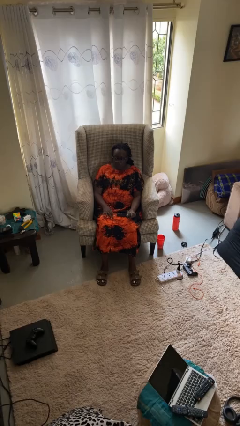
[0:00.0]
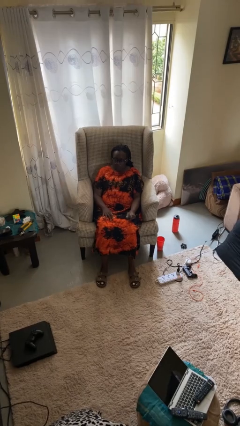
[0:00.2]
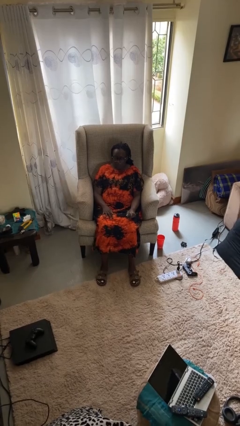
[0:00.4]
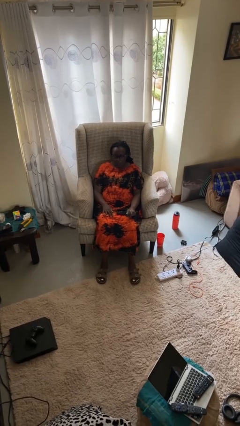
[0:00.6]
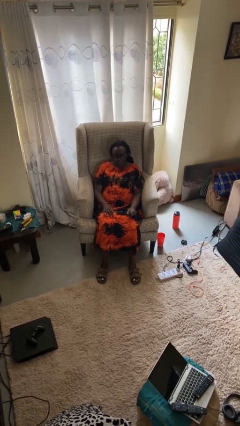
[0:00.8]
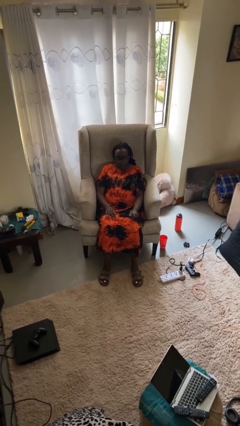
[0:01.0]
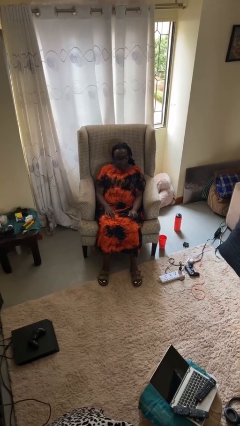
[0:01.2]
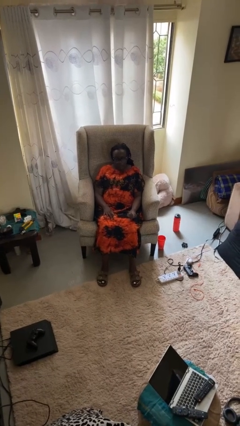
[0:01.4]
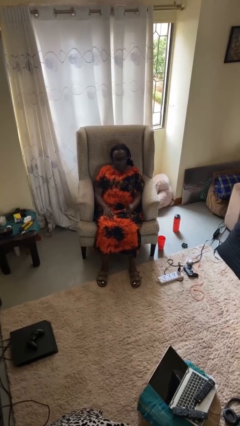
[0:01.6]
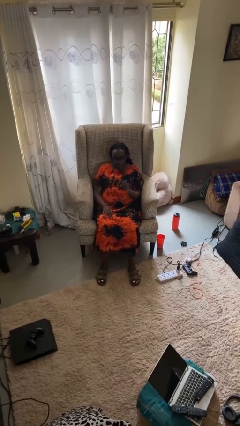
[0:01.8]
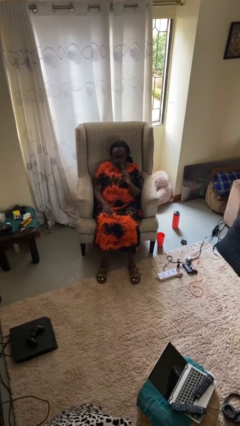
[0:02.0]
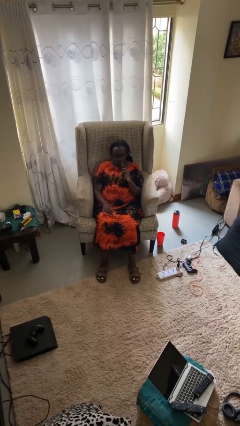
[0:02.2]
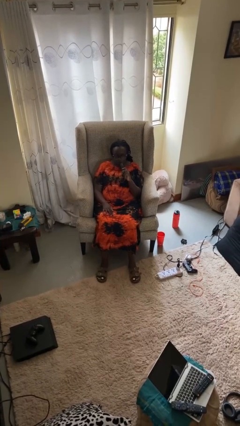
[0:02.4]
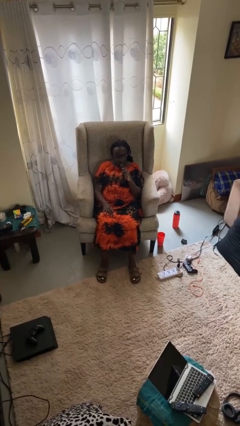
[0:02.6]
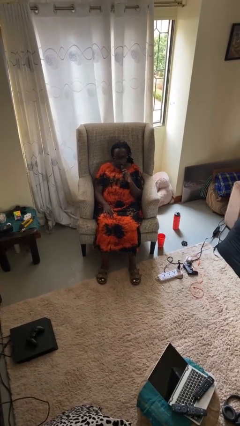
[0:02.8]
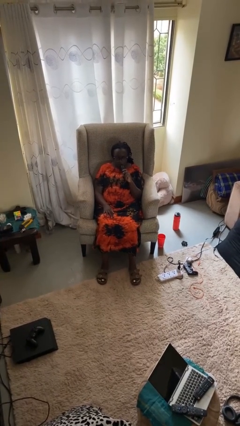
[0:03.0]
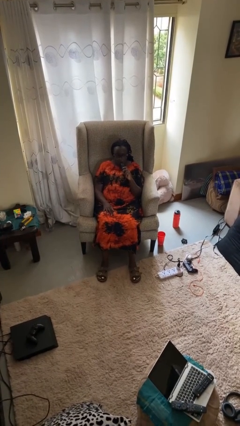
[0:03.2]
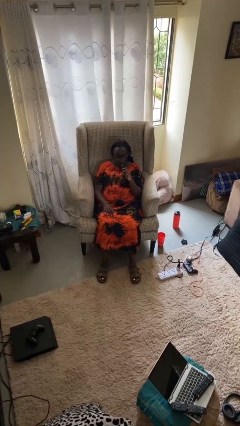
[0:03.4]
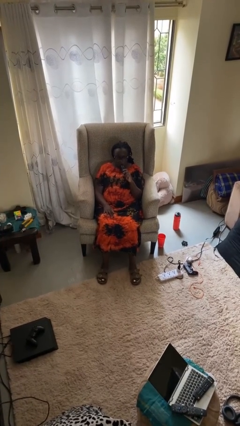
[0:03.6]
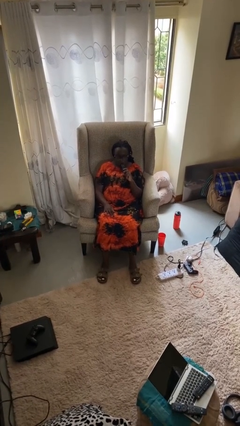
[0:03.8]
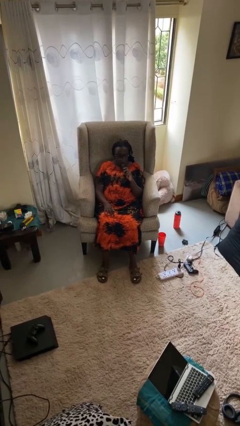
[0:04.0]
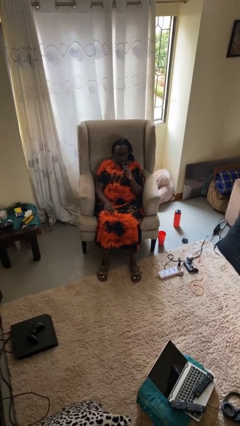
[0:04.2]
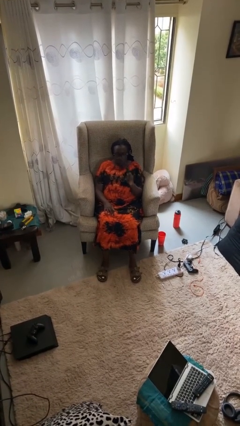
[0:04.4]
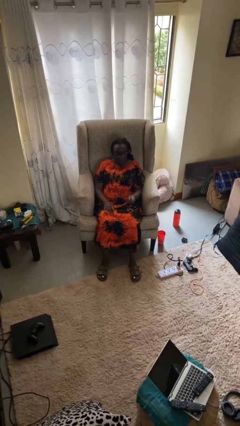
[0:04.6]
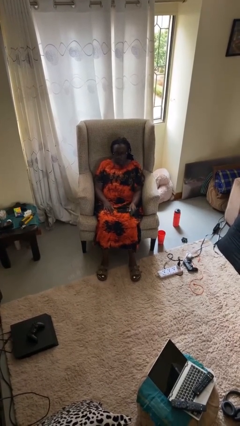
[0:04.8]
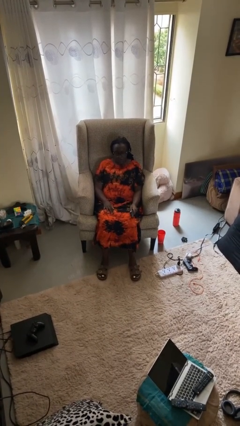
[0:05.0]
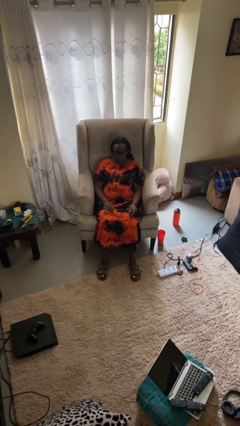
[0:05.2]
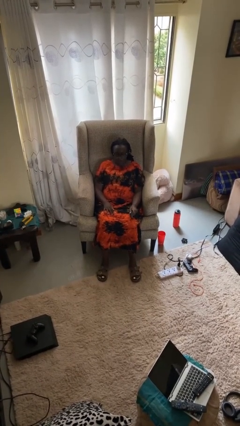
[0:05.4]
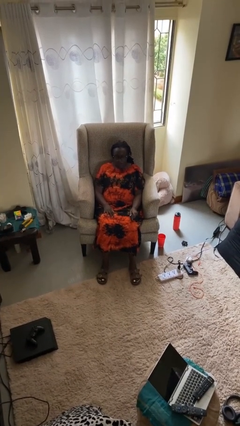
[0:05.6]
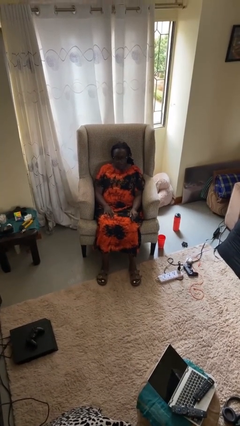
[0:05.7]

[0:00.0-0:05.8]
person vapes

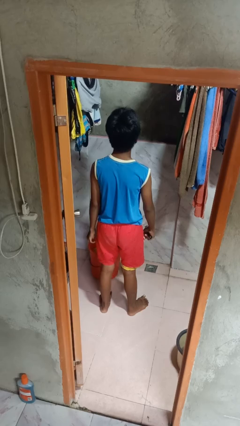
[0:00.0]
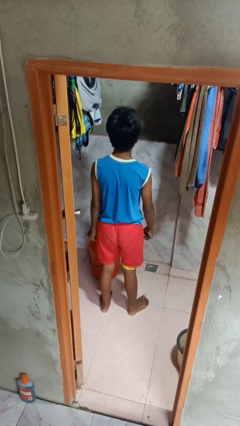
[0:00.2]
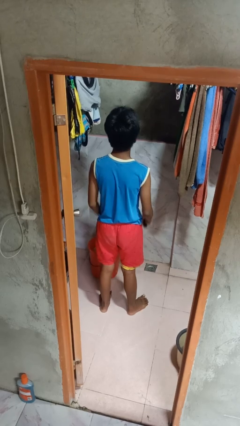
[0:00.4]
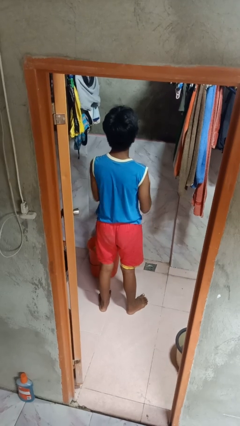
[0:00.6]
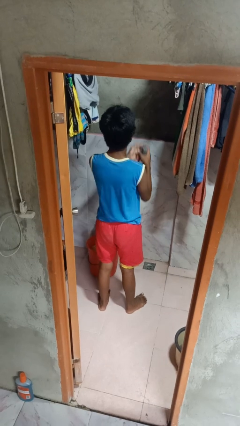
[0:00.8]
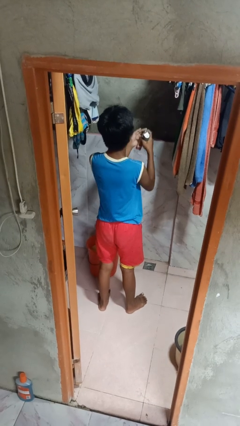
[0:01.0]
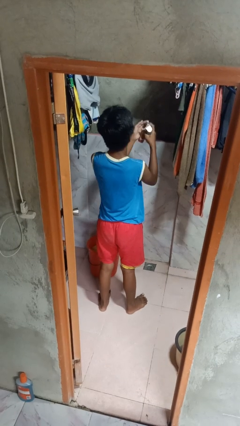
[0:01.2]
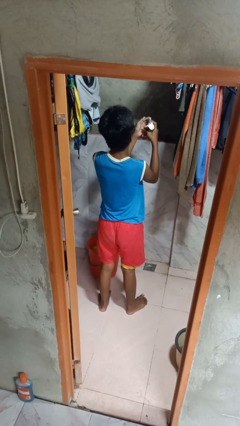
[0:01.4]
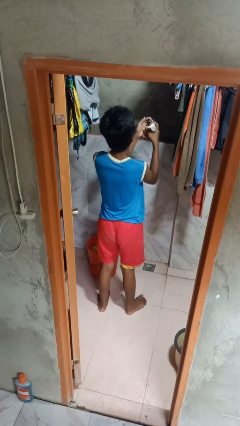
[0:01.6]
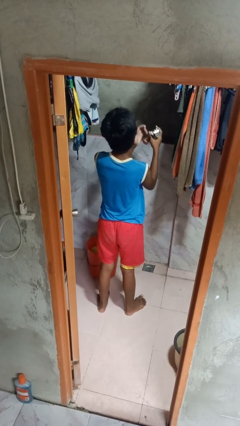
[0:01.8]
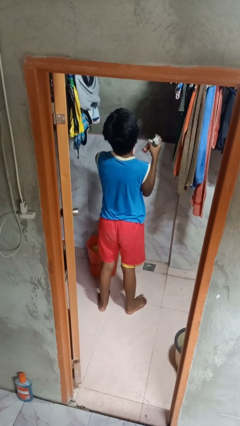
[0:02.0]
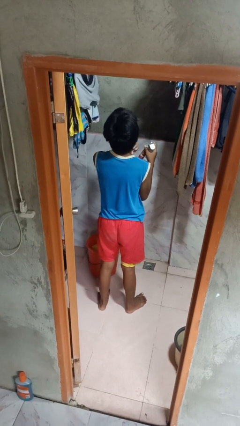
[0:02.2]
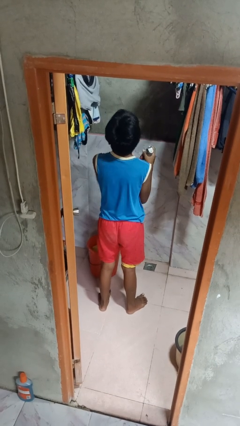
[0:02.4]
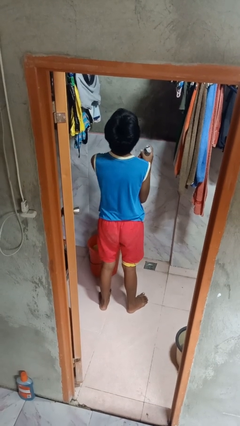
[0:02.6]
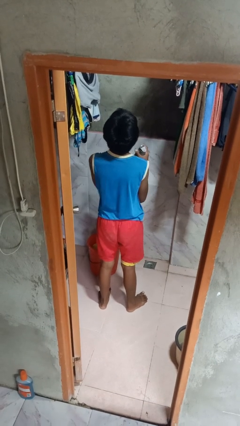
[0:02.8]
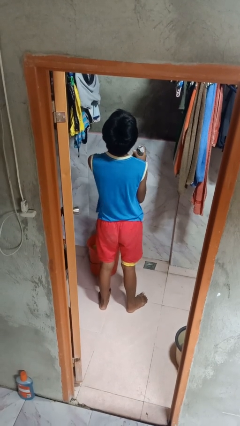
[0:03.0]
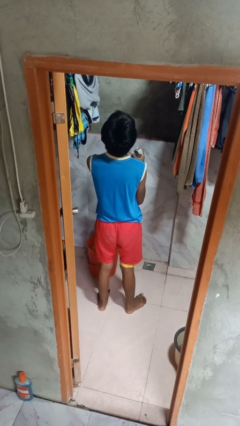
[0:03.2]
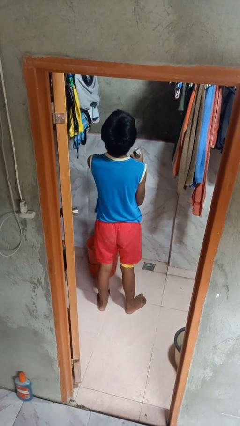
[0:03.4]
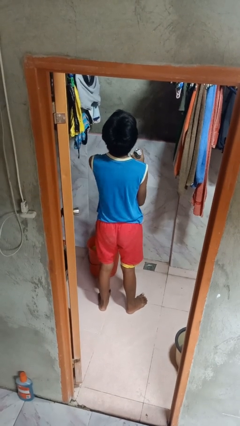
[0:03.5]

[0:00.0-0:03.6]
person applies shaving cream

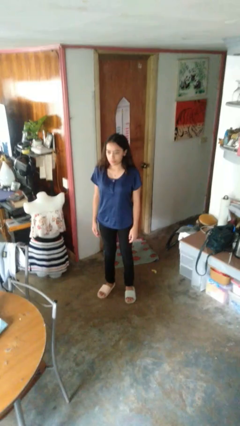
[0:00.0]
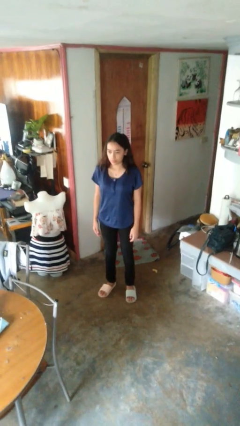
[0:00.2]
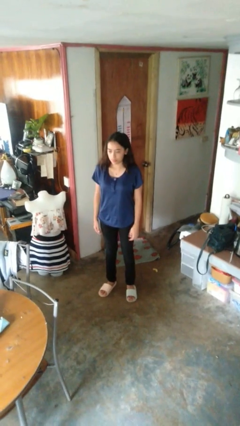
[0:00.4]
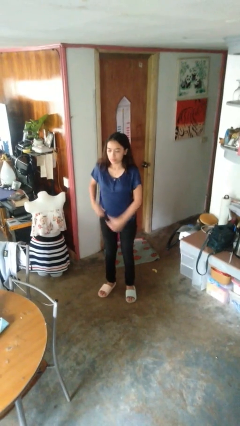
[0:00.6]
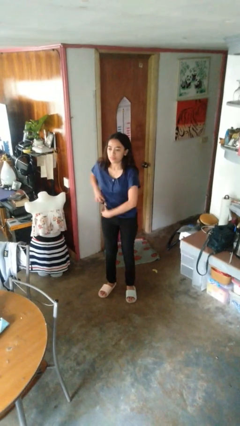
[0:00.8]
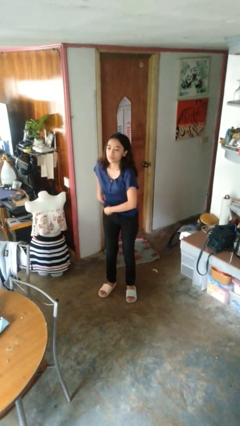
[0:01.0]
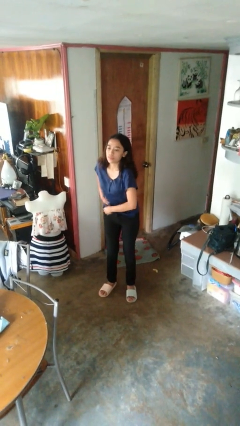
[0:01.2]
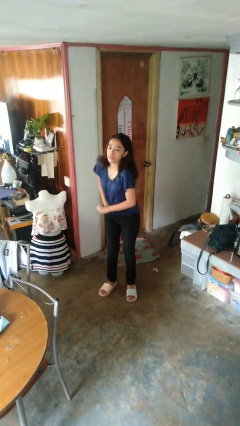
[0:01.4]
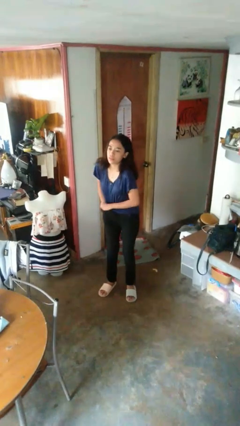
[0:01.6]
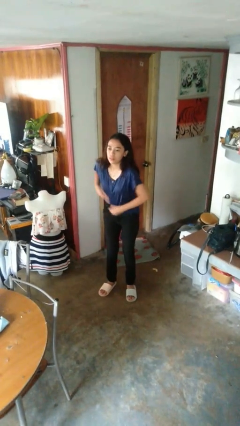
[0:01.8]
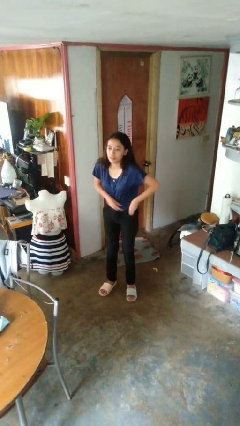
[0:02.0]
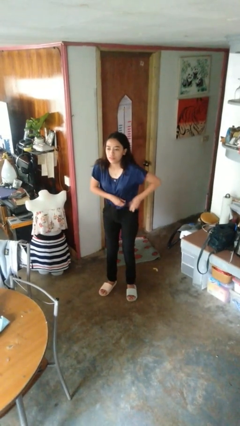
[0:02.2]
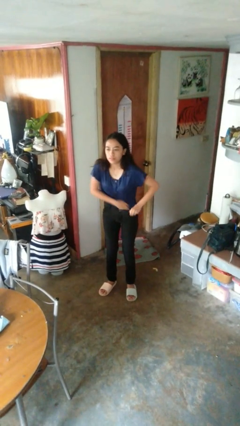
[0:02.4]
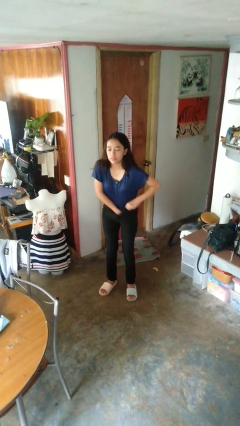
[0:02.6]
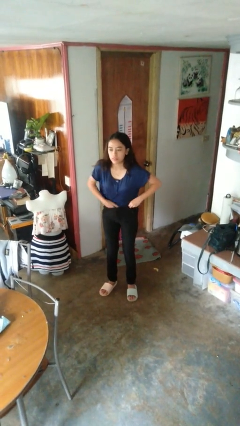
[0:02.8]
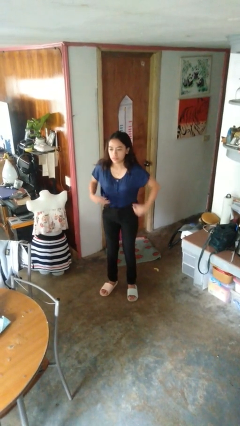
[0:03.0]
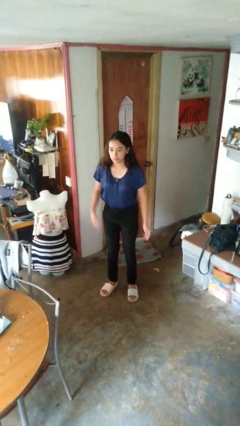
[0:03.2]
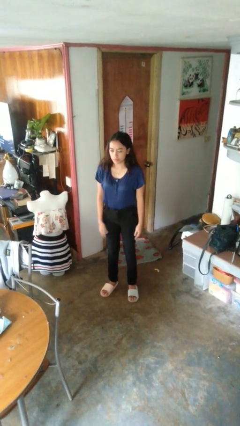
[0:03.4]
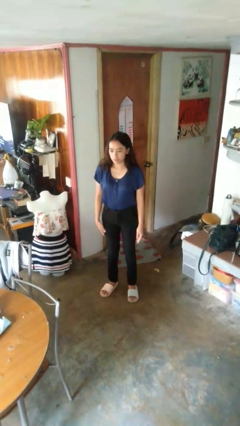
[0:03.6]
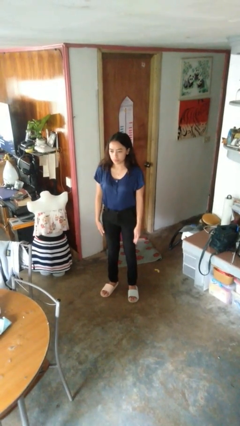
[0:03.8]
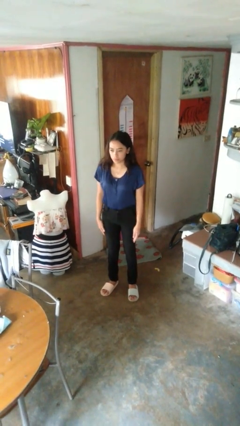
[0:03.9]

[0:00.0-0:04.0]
person tucks in shirt

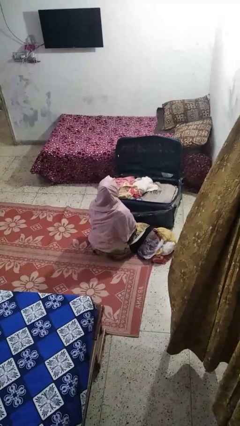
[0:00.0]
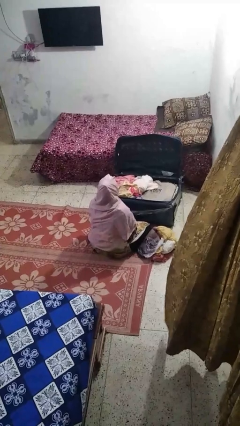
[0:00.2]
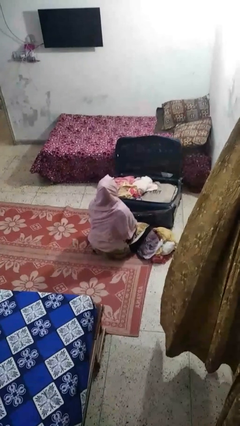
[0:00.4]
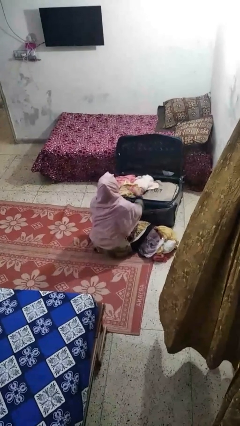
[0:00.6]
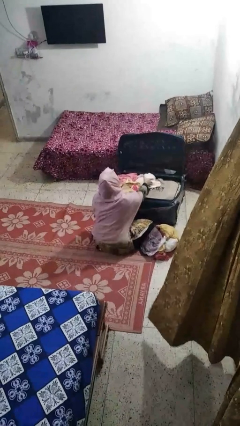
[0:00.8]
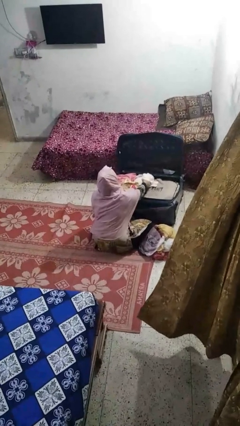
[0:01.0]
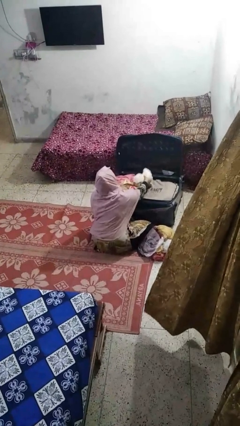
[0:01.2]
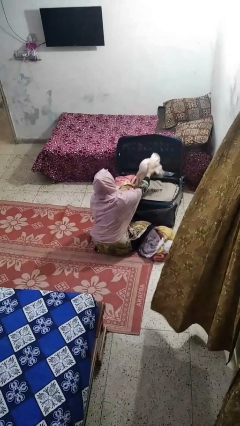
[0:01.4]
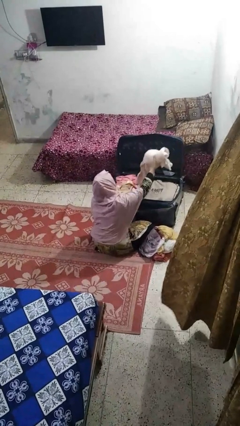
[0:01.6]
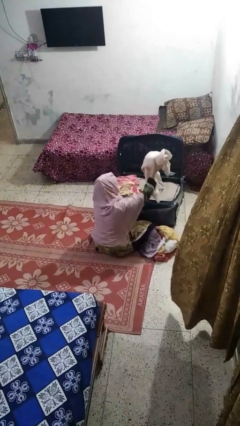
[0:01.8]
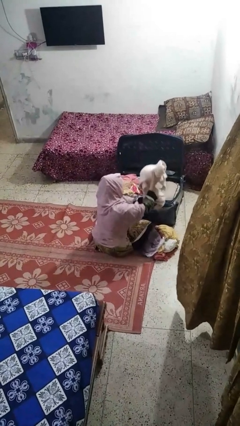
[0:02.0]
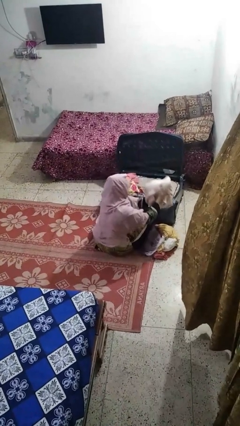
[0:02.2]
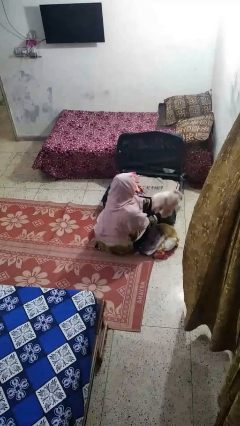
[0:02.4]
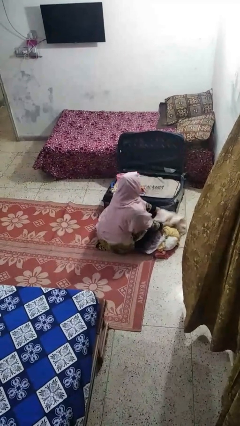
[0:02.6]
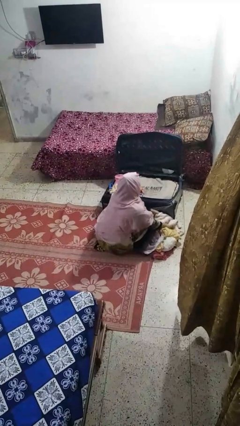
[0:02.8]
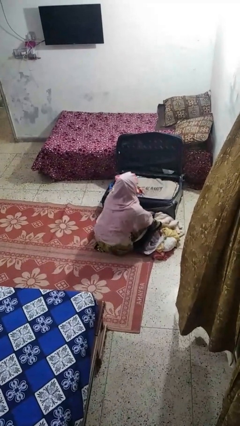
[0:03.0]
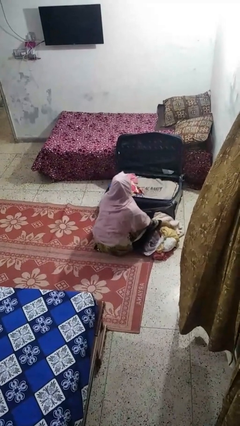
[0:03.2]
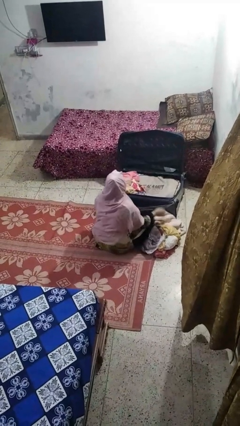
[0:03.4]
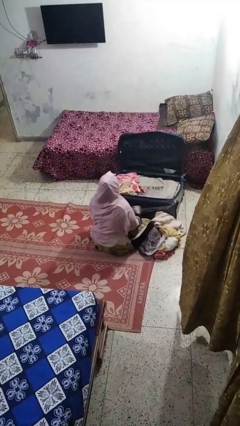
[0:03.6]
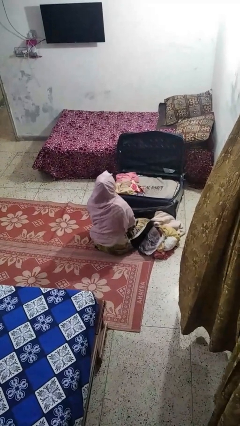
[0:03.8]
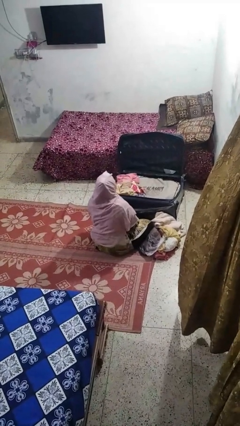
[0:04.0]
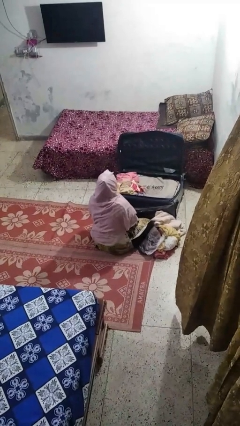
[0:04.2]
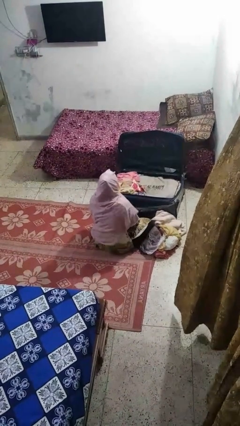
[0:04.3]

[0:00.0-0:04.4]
person unloads clothes from suitcase
